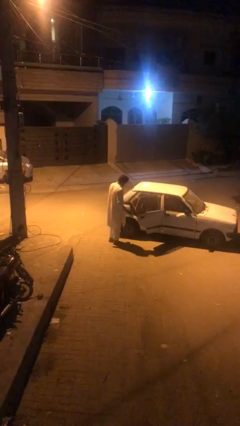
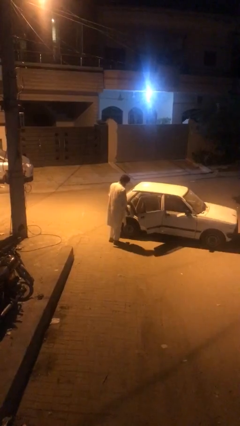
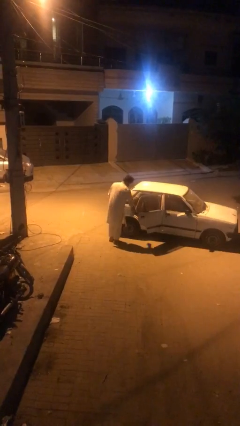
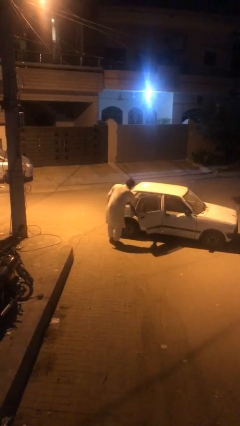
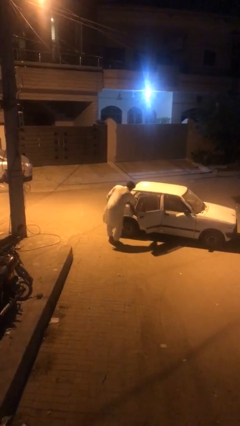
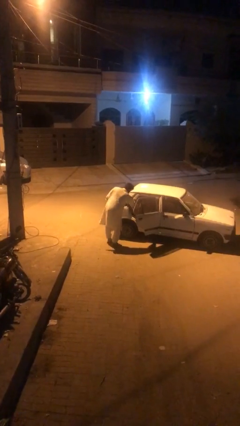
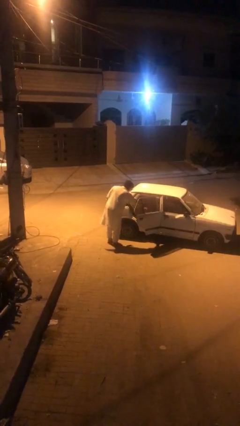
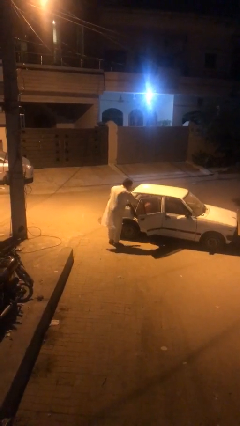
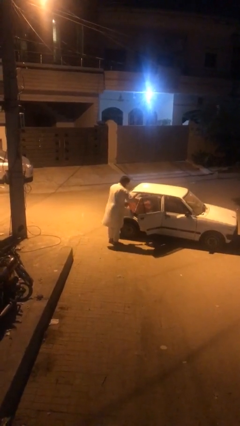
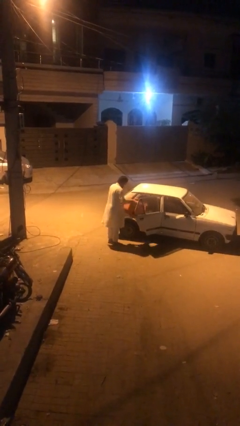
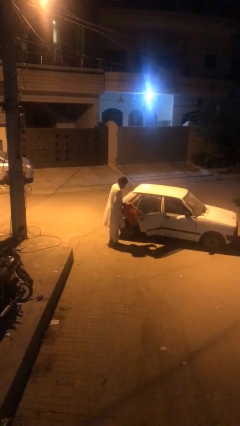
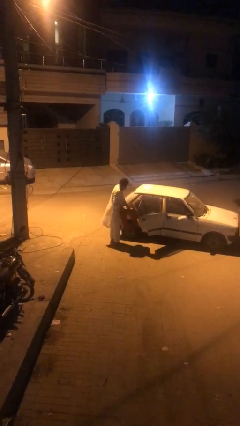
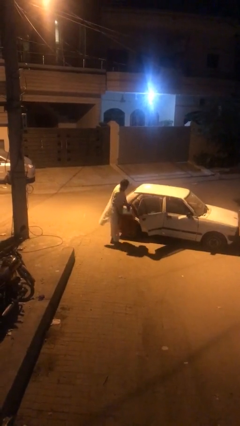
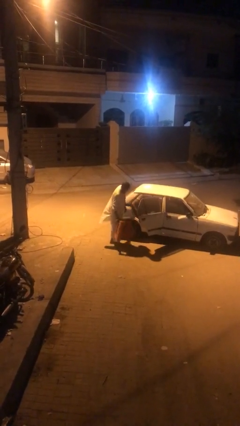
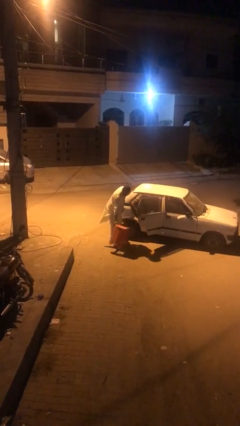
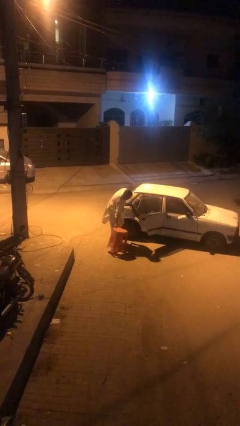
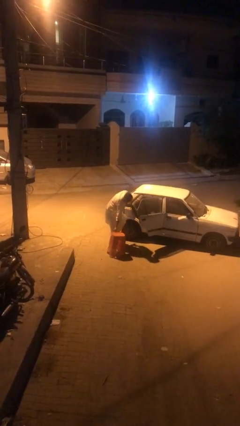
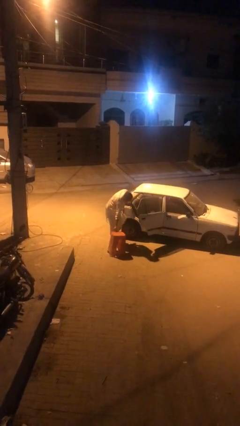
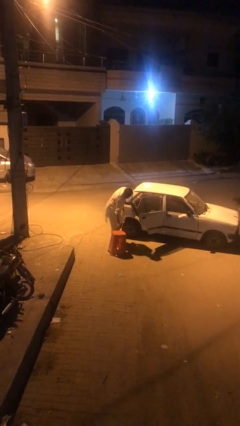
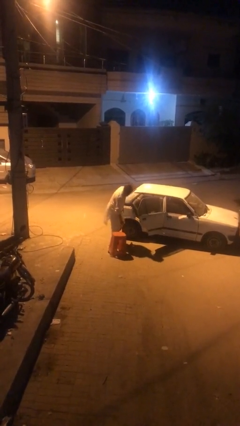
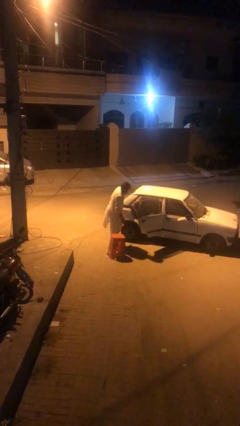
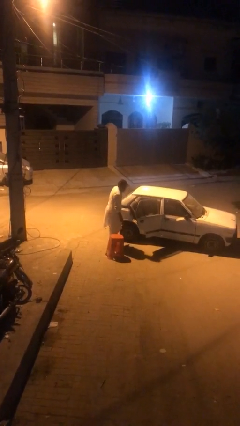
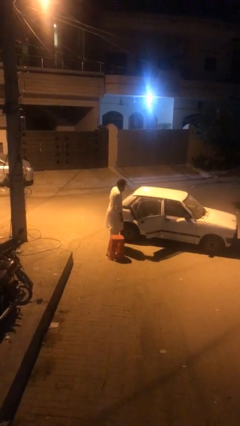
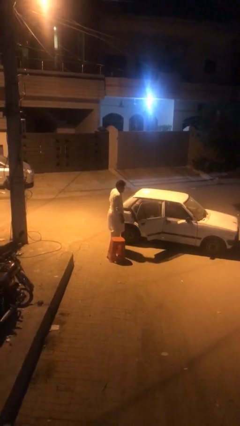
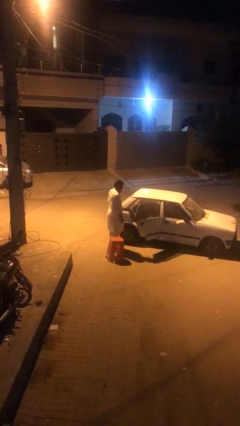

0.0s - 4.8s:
person unloads car

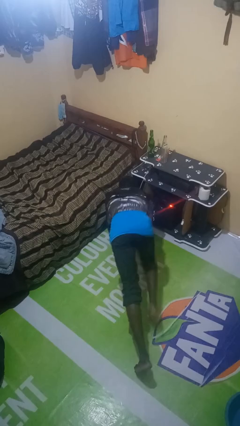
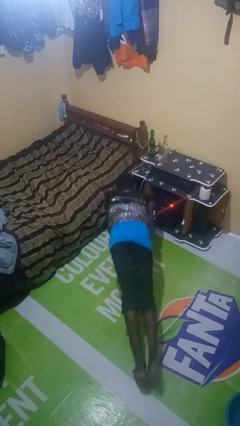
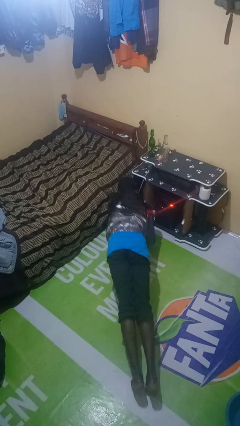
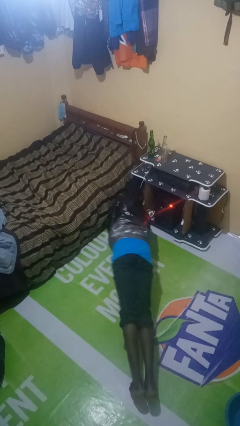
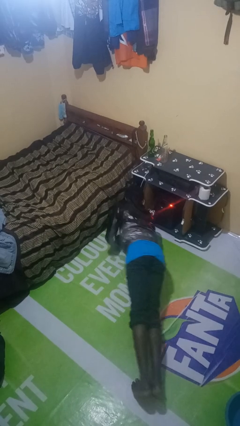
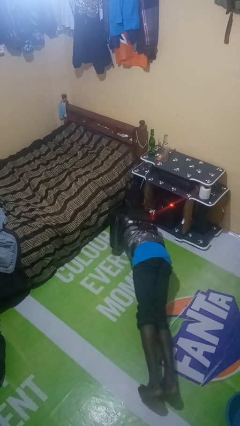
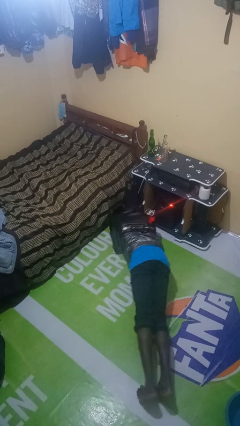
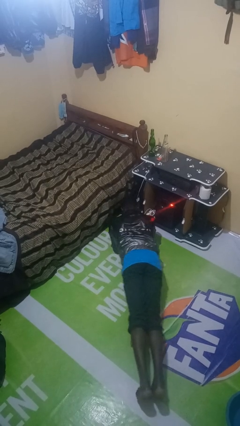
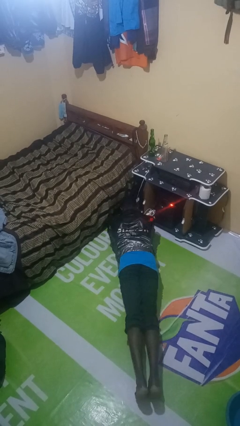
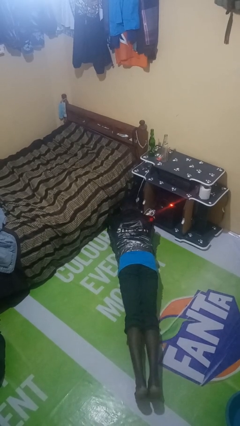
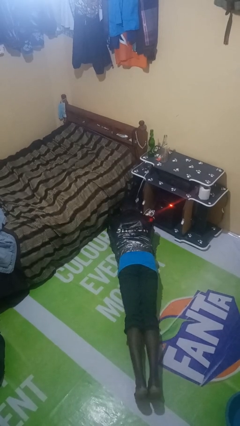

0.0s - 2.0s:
person exercises with plank

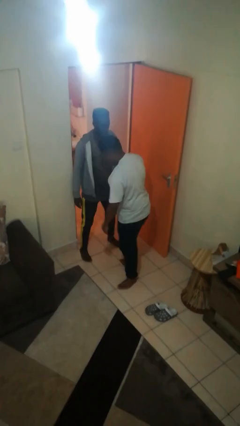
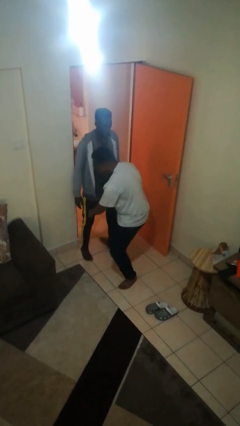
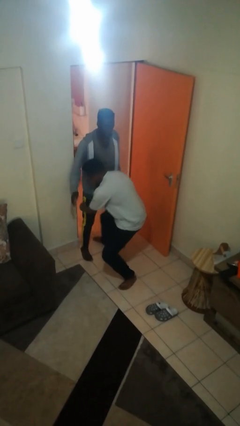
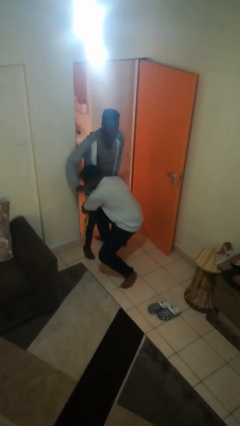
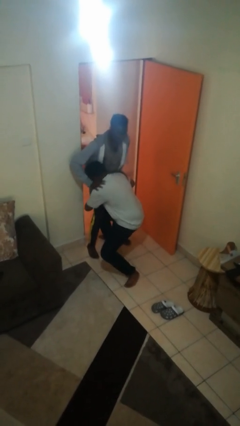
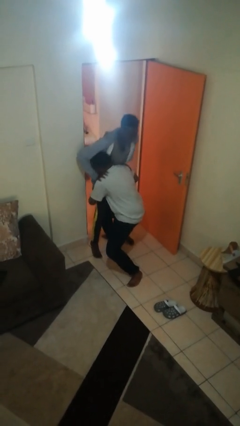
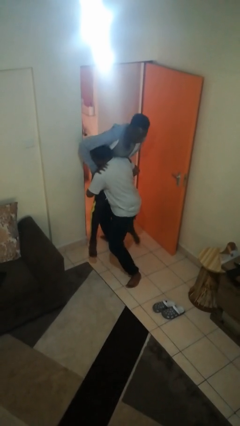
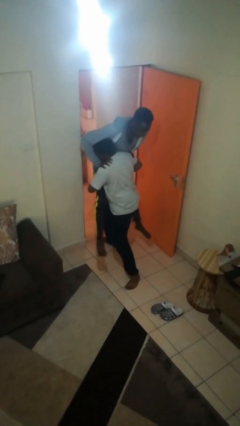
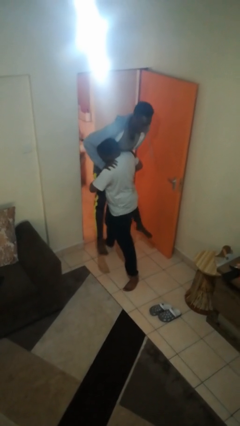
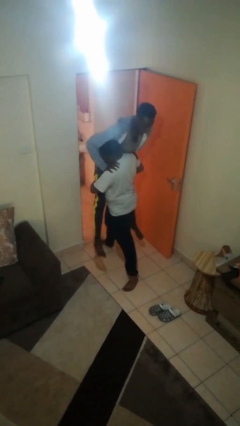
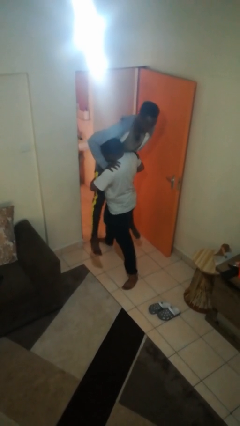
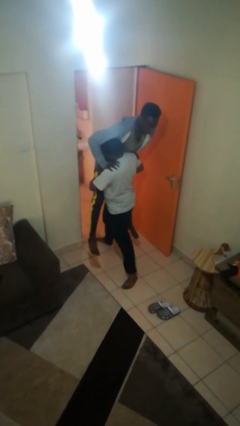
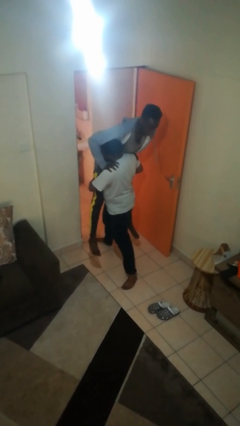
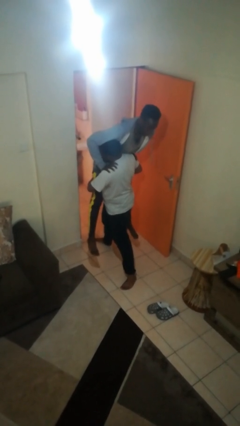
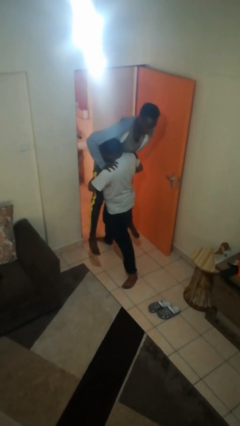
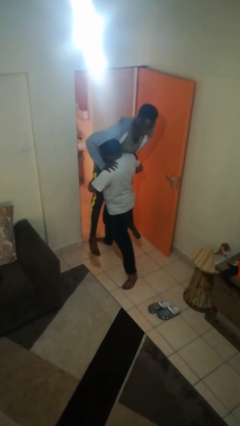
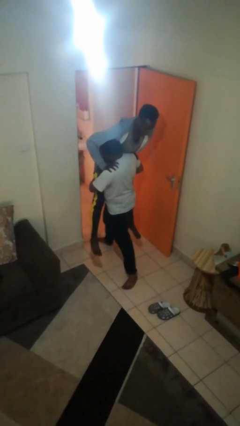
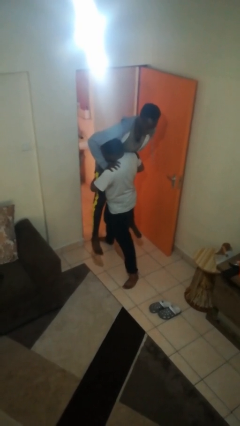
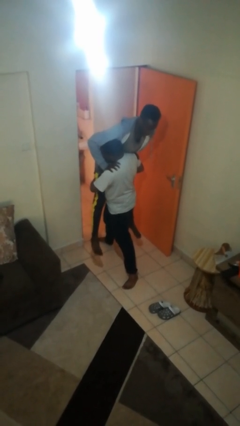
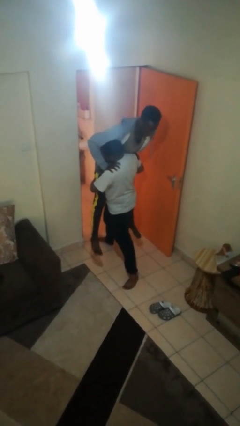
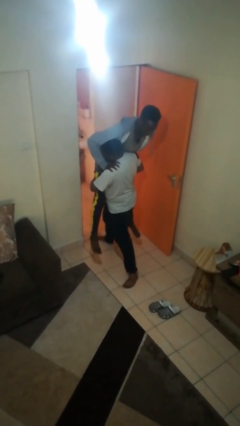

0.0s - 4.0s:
person picks up person

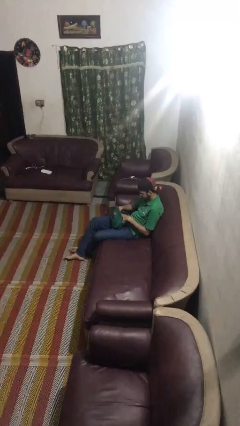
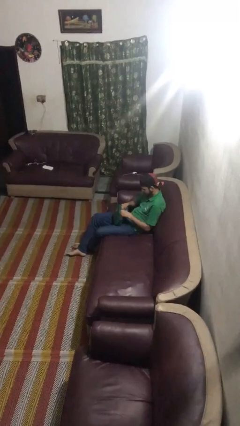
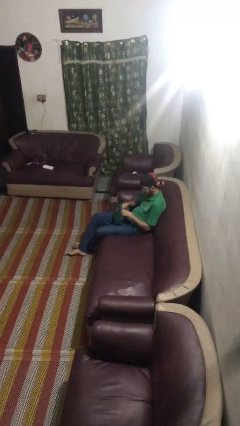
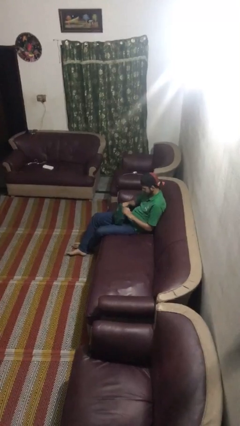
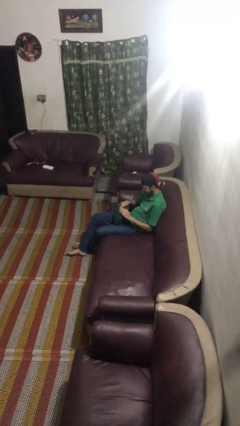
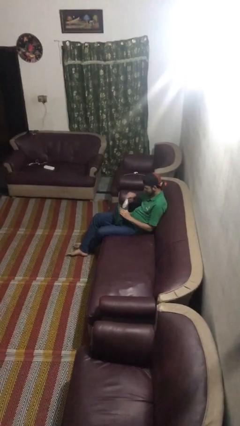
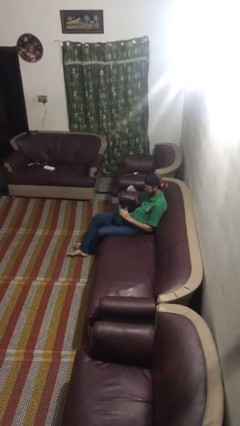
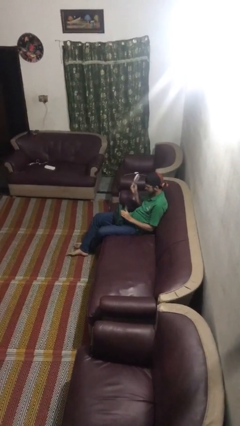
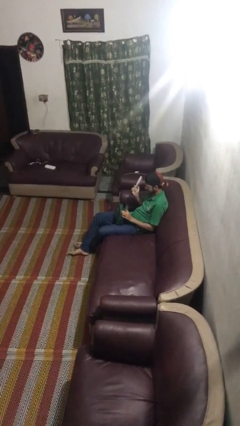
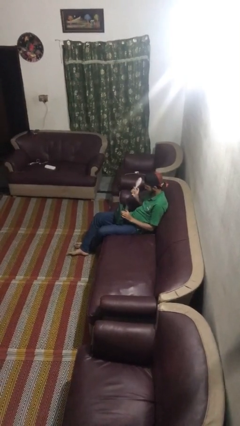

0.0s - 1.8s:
person takes object from purse

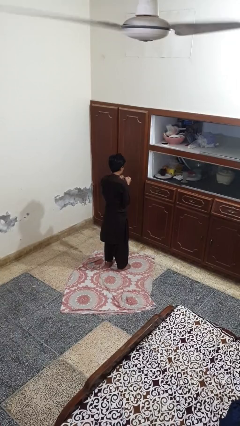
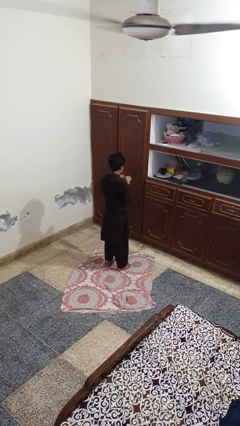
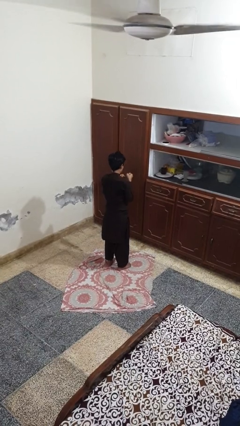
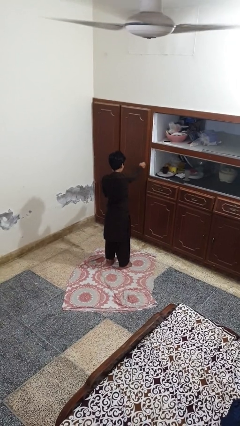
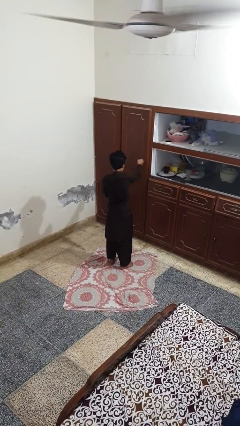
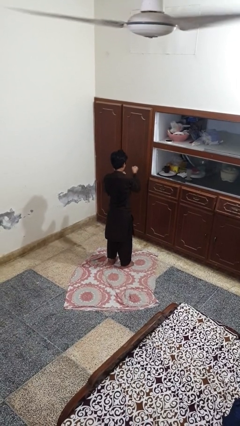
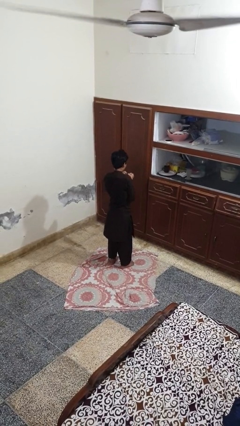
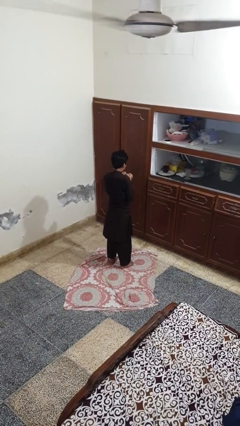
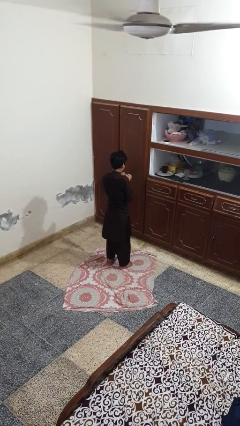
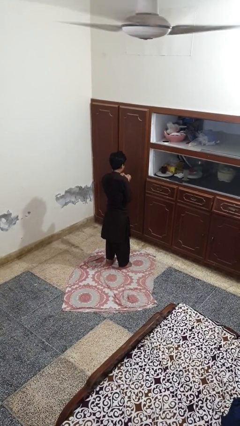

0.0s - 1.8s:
person punches

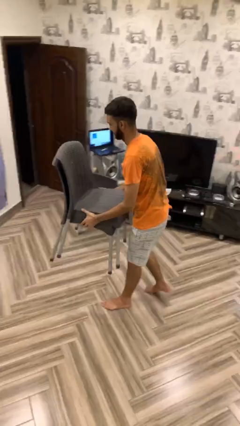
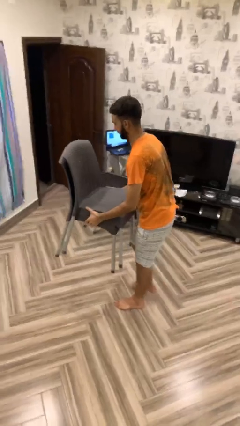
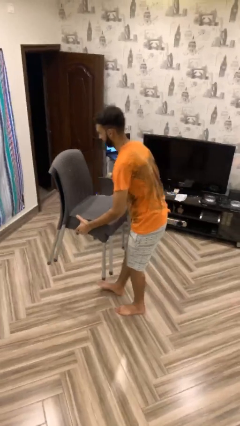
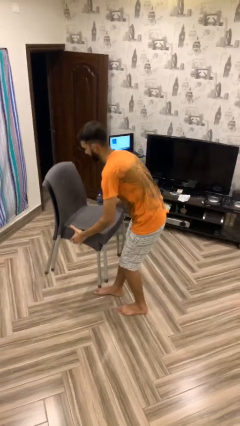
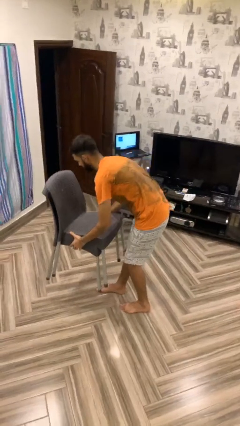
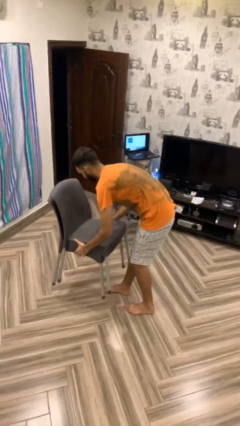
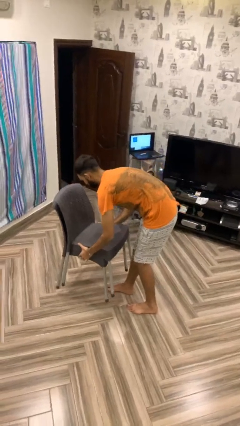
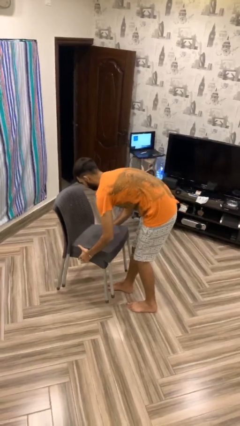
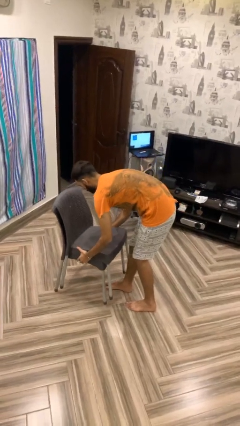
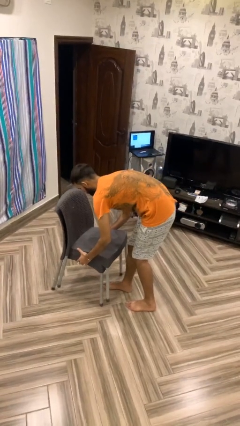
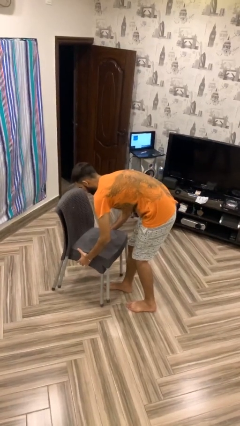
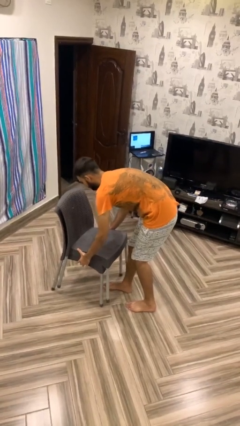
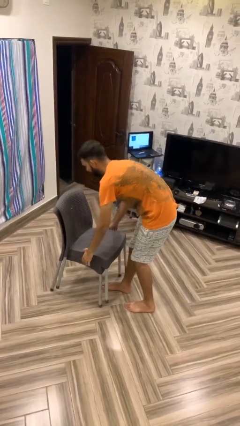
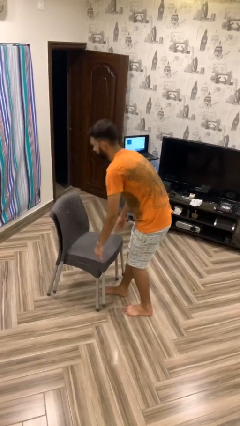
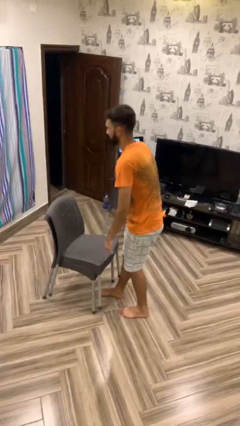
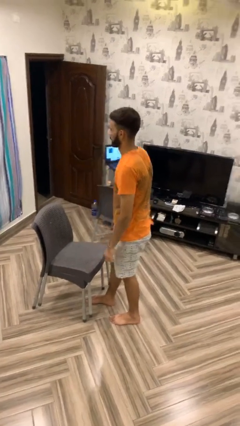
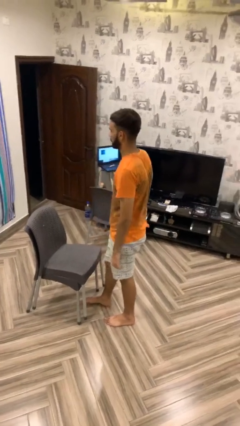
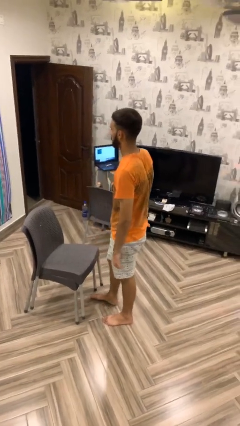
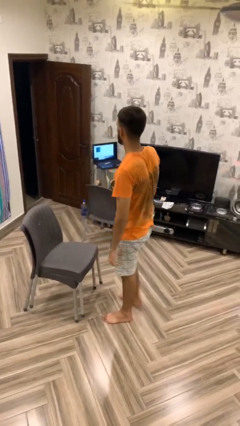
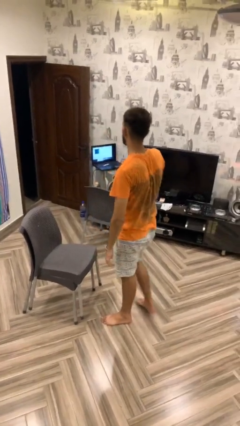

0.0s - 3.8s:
person puts down object on floor
